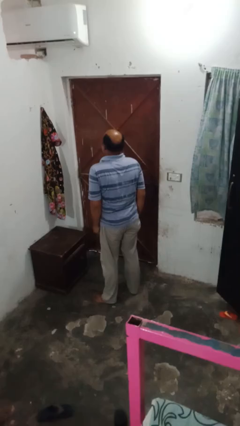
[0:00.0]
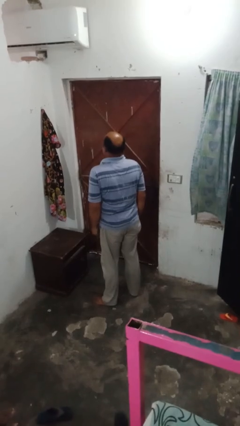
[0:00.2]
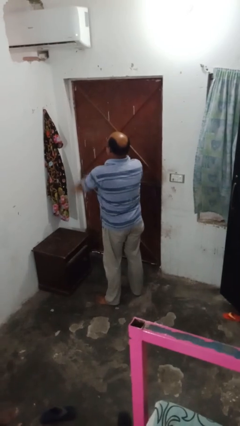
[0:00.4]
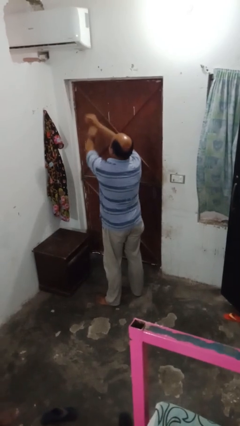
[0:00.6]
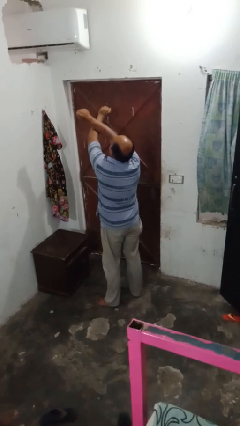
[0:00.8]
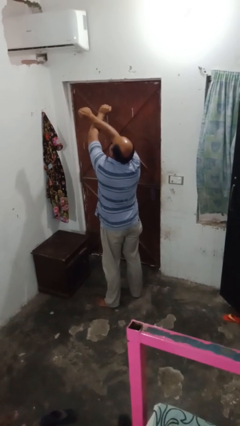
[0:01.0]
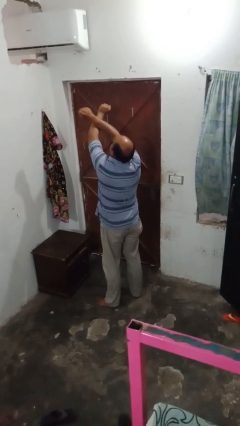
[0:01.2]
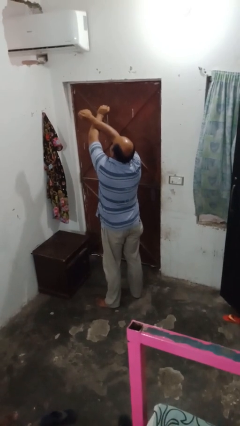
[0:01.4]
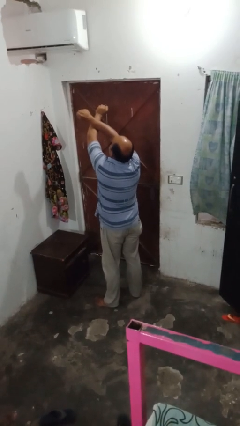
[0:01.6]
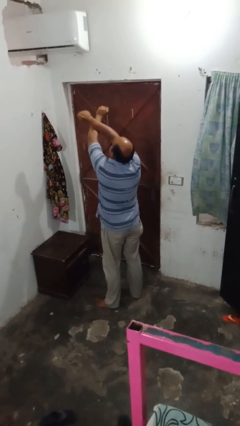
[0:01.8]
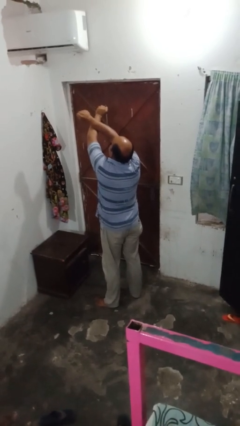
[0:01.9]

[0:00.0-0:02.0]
person gestures arms x

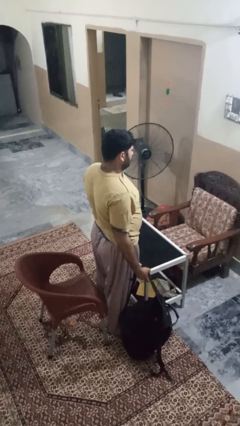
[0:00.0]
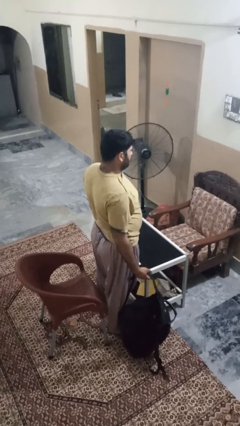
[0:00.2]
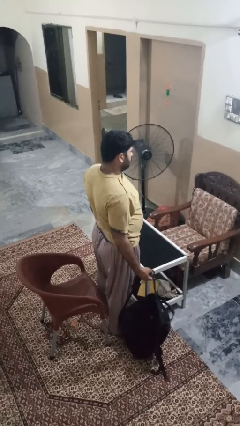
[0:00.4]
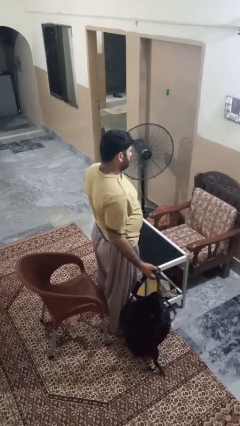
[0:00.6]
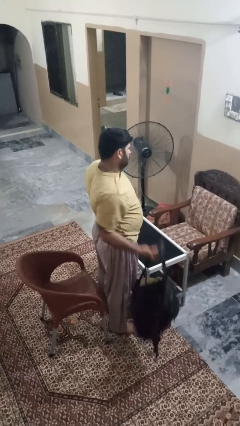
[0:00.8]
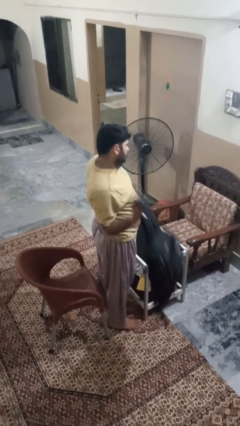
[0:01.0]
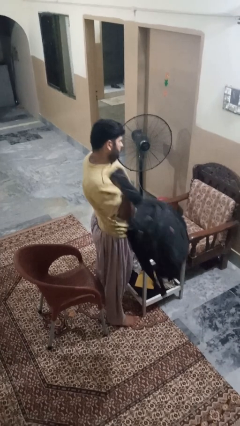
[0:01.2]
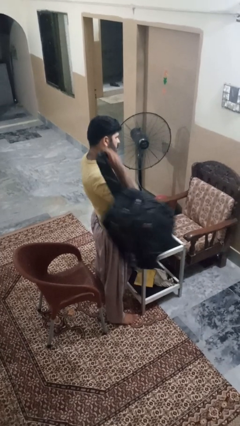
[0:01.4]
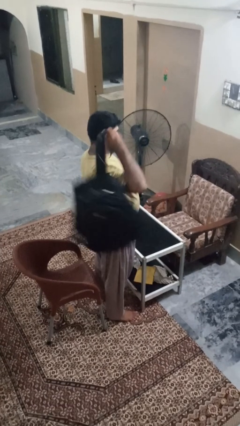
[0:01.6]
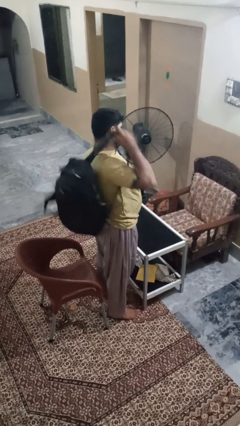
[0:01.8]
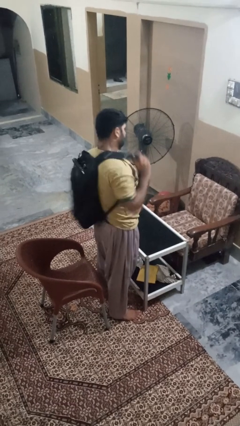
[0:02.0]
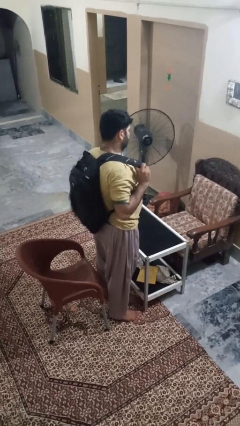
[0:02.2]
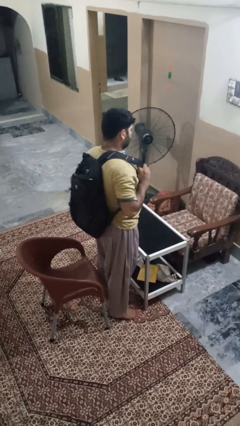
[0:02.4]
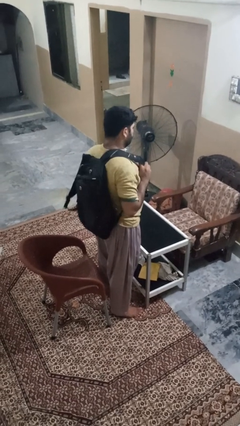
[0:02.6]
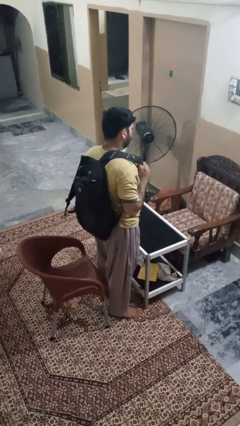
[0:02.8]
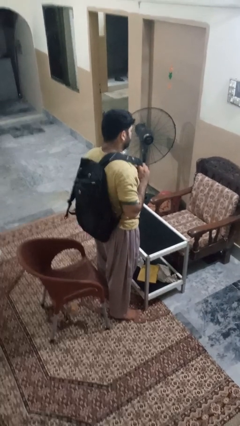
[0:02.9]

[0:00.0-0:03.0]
person puts on backpack

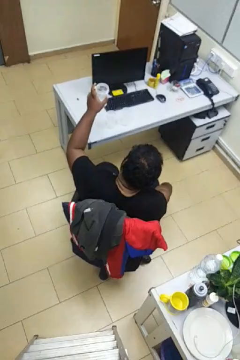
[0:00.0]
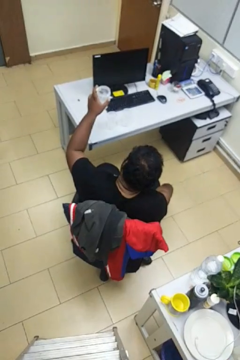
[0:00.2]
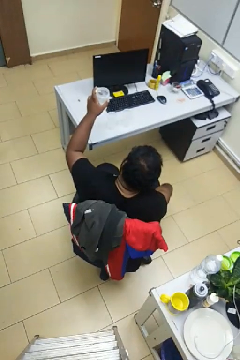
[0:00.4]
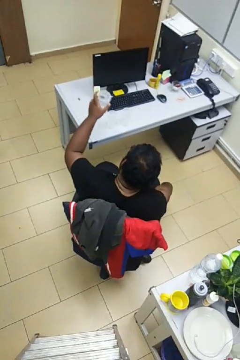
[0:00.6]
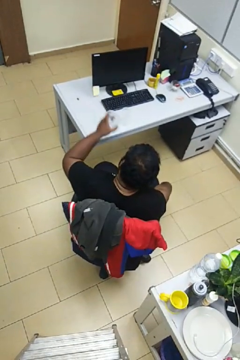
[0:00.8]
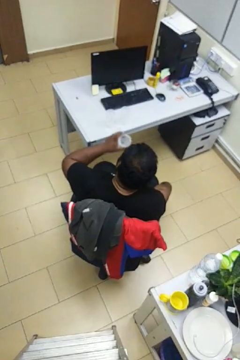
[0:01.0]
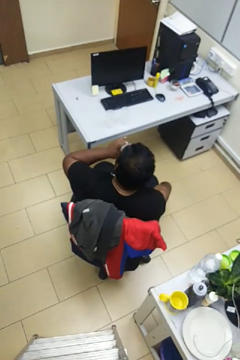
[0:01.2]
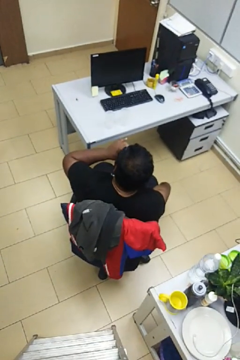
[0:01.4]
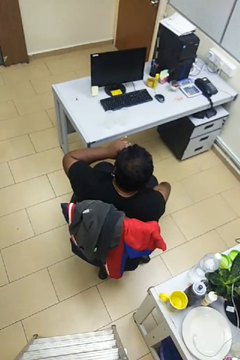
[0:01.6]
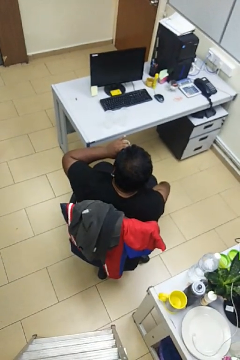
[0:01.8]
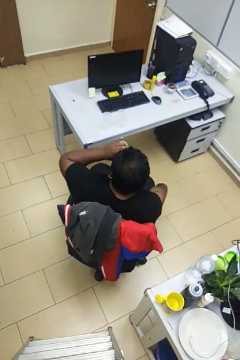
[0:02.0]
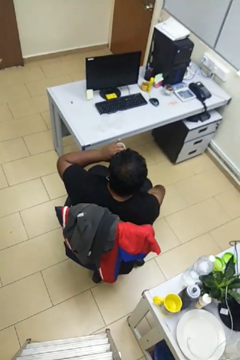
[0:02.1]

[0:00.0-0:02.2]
person drinks from shotglass

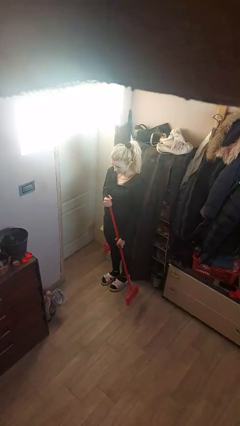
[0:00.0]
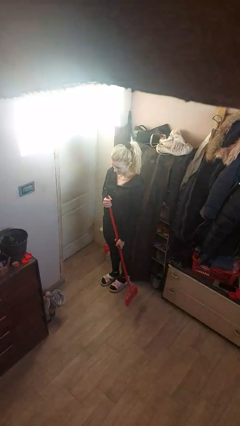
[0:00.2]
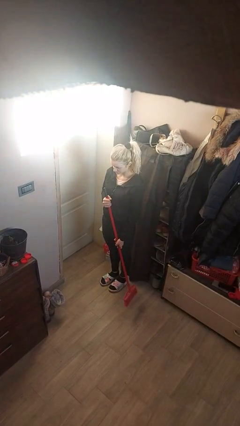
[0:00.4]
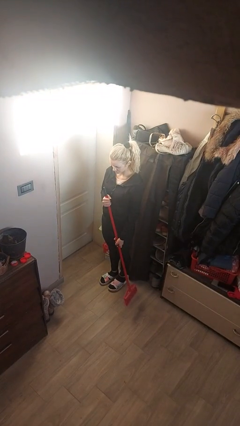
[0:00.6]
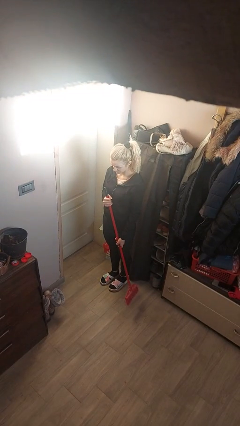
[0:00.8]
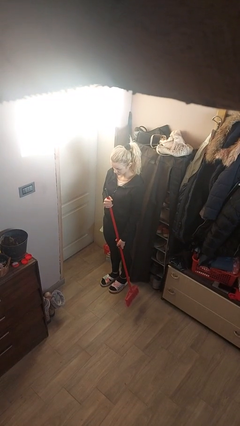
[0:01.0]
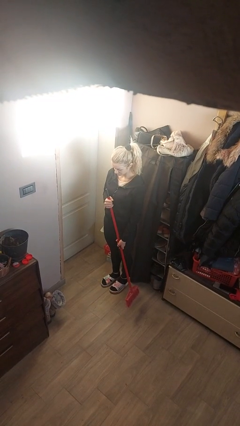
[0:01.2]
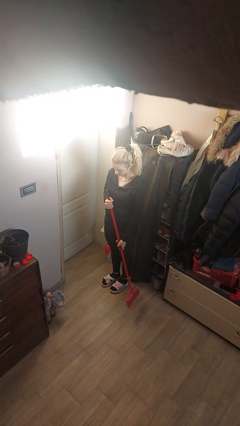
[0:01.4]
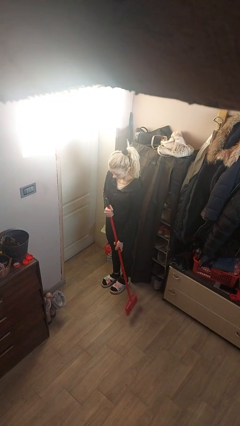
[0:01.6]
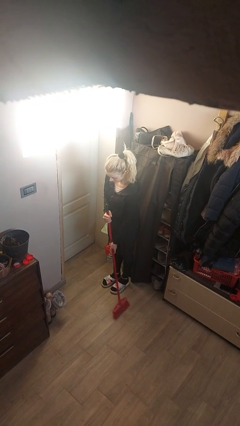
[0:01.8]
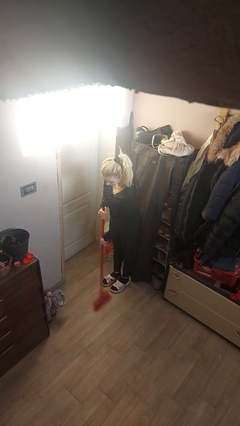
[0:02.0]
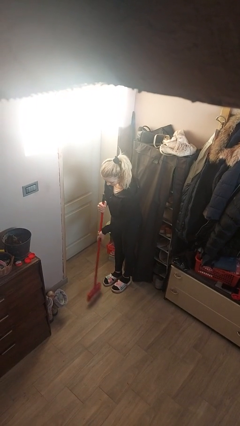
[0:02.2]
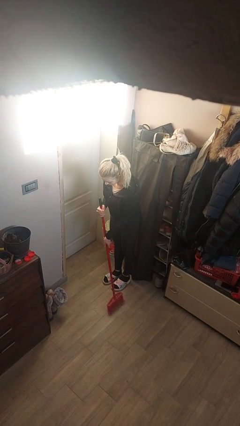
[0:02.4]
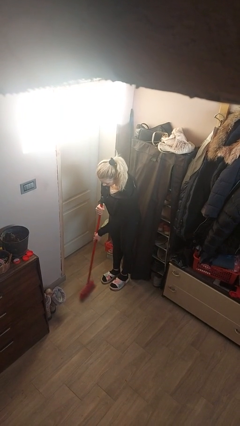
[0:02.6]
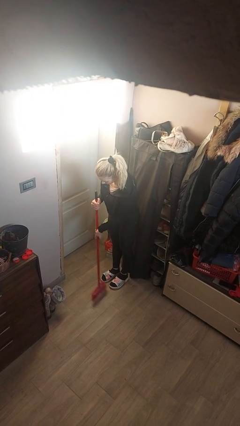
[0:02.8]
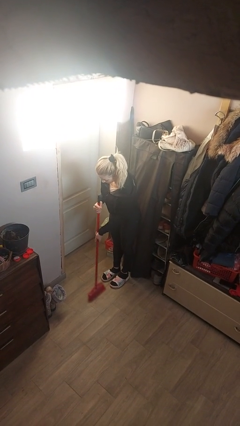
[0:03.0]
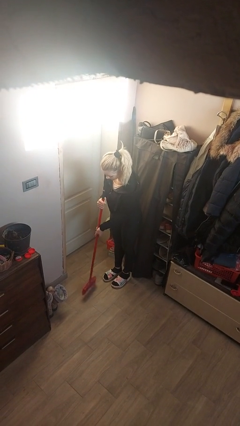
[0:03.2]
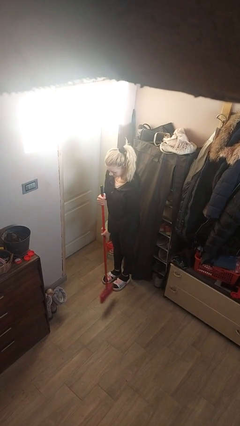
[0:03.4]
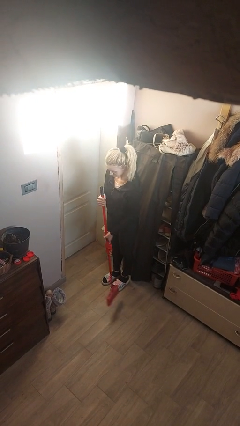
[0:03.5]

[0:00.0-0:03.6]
person sweeps floor

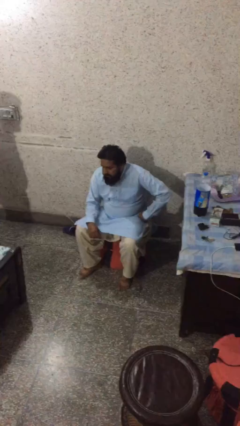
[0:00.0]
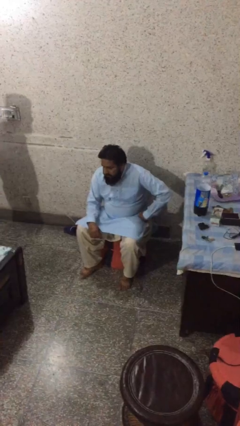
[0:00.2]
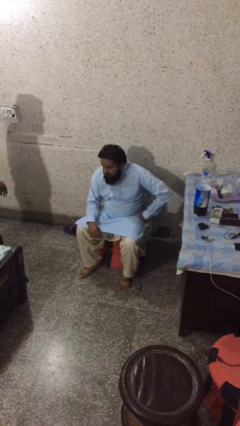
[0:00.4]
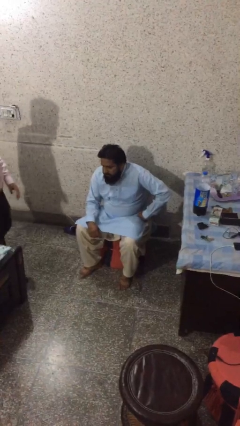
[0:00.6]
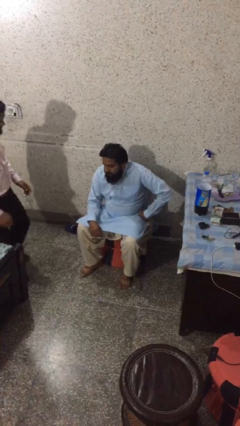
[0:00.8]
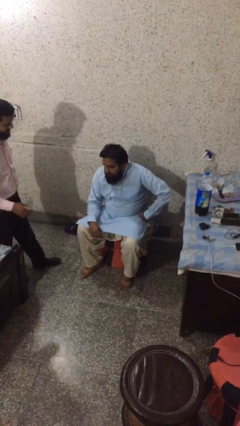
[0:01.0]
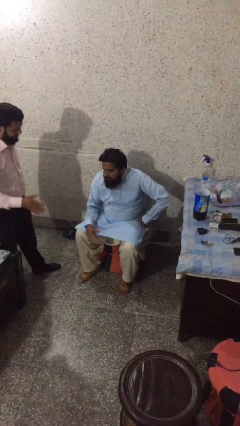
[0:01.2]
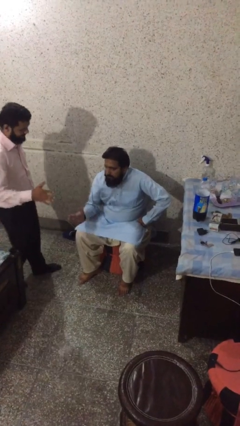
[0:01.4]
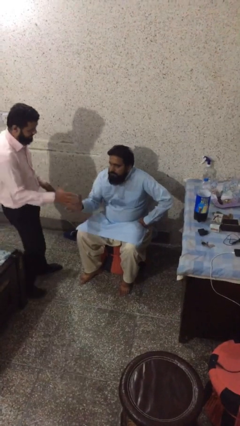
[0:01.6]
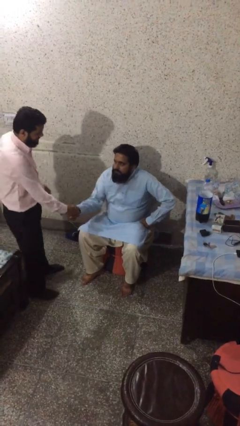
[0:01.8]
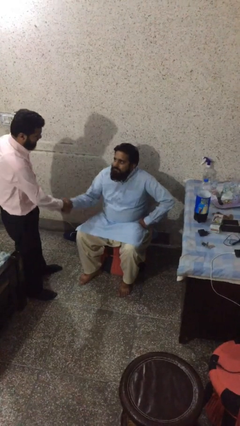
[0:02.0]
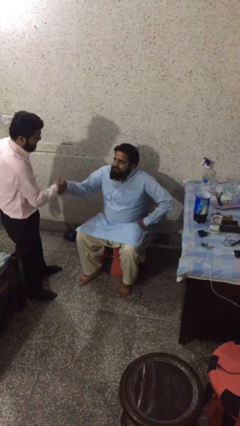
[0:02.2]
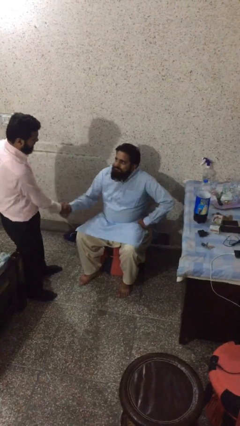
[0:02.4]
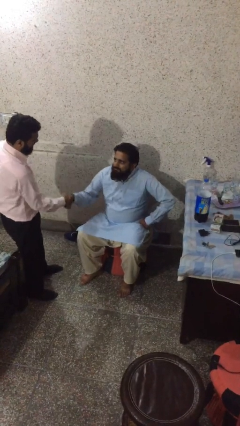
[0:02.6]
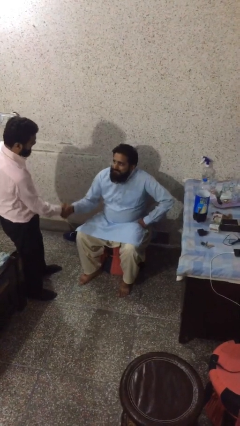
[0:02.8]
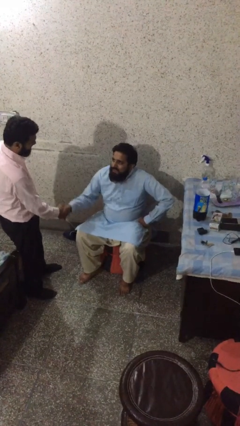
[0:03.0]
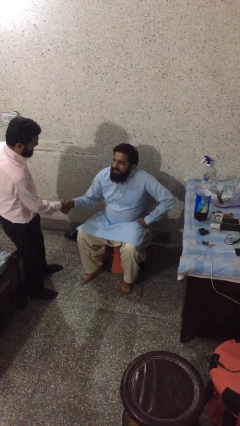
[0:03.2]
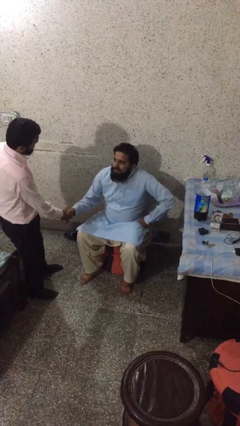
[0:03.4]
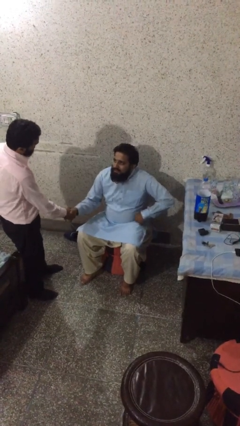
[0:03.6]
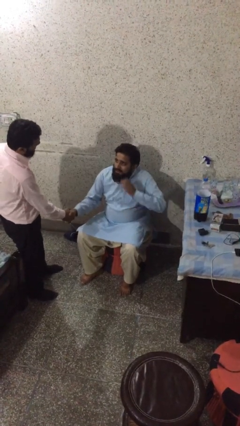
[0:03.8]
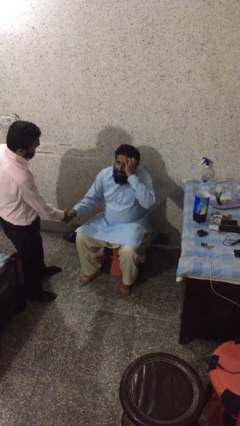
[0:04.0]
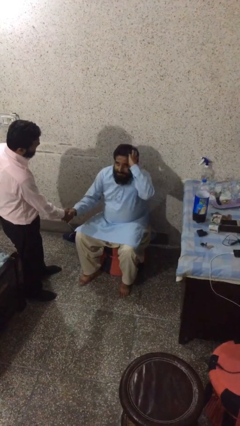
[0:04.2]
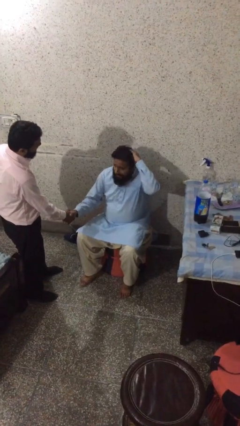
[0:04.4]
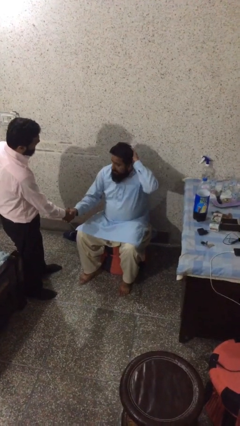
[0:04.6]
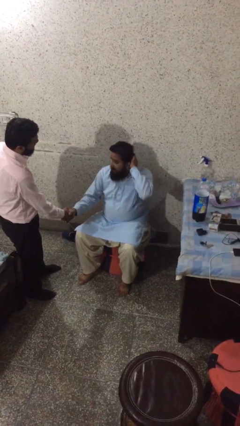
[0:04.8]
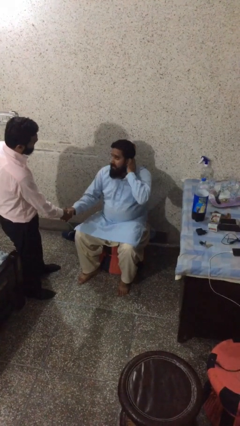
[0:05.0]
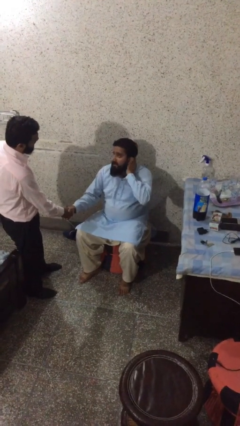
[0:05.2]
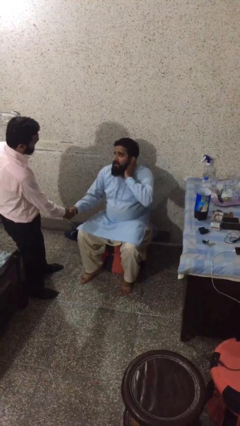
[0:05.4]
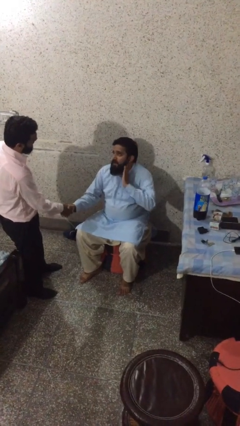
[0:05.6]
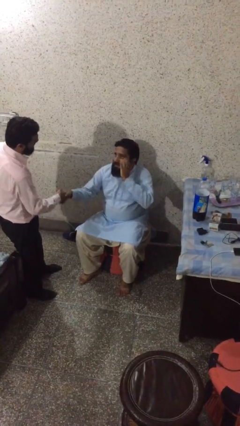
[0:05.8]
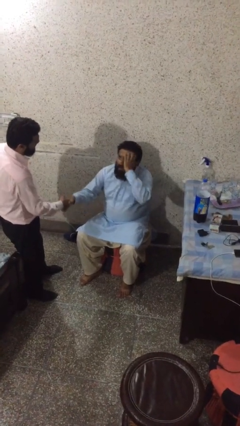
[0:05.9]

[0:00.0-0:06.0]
person shakes hand

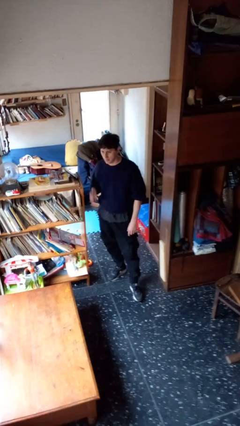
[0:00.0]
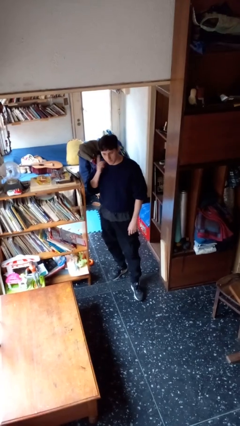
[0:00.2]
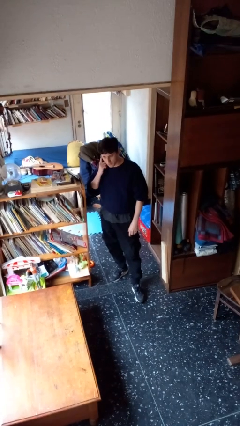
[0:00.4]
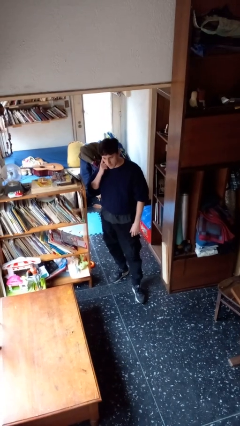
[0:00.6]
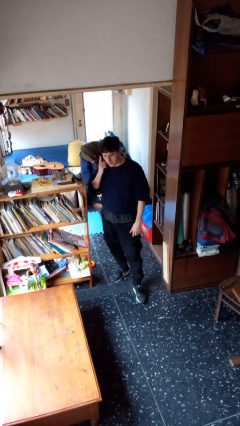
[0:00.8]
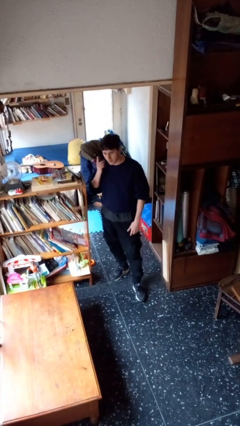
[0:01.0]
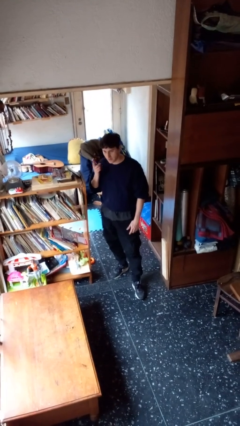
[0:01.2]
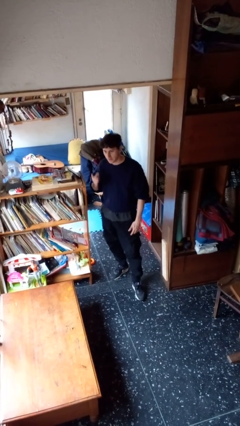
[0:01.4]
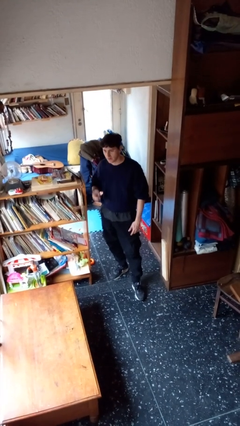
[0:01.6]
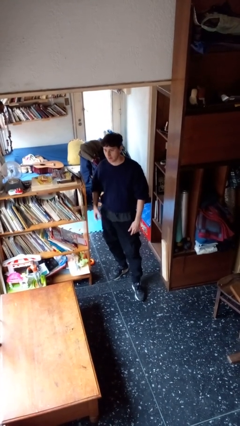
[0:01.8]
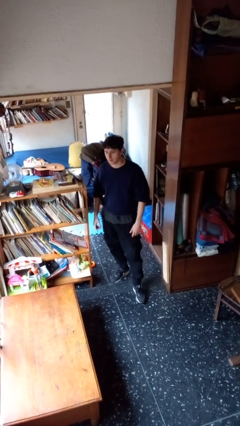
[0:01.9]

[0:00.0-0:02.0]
person gestures listen closely
